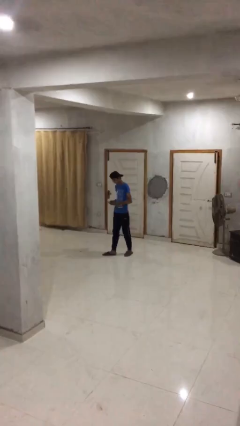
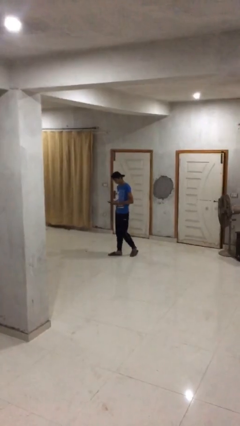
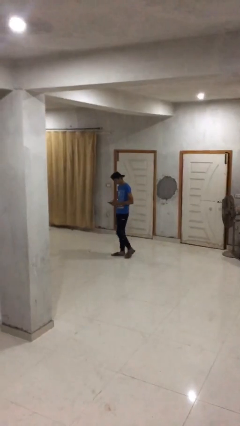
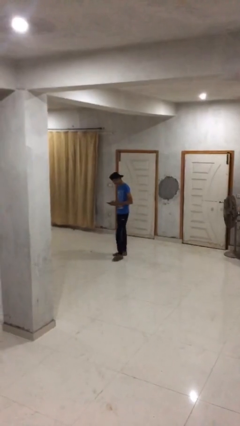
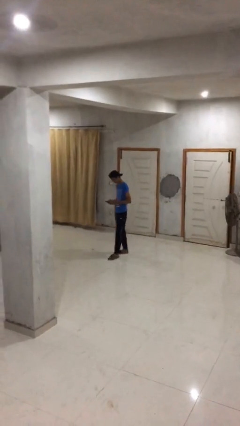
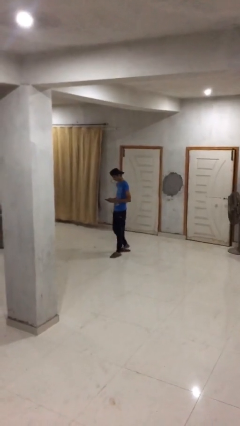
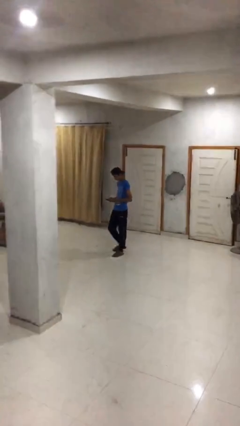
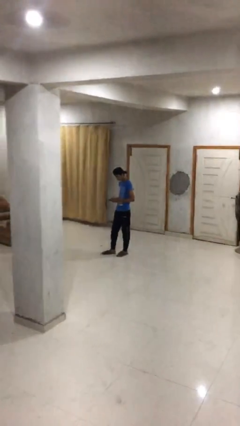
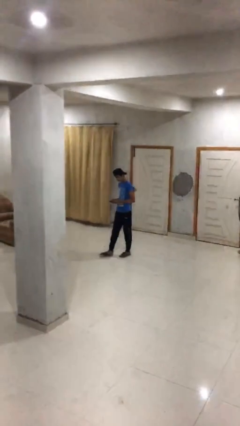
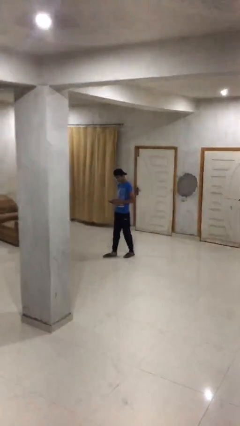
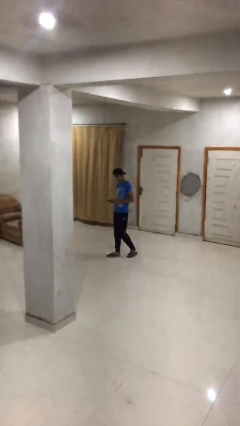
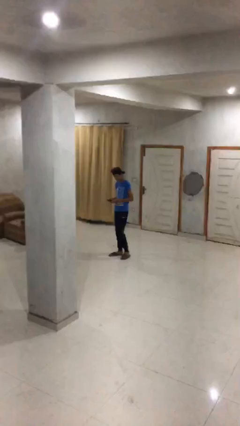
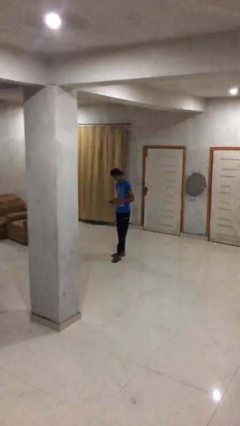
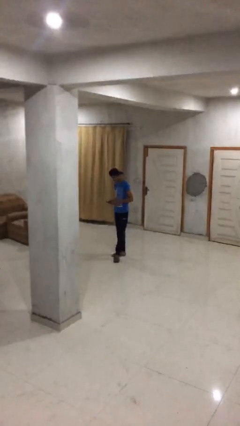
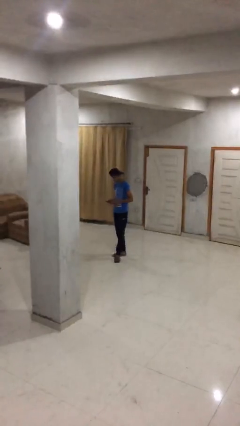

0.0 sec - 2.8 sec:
person texts on phone

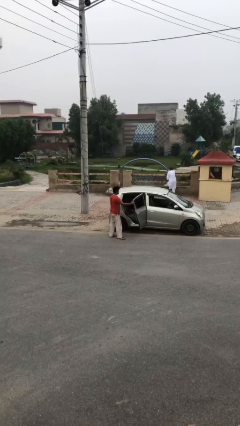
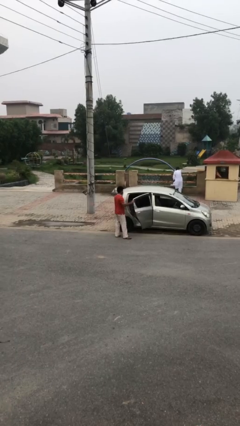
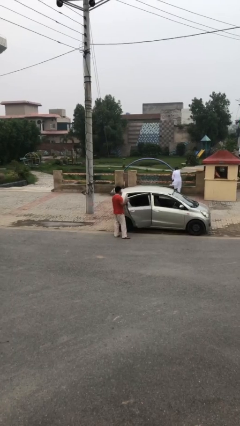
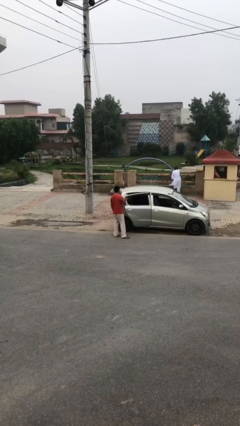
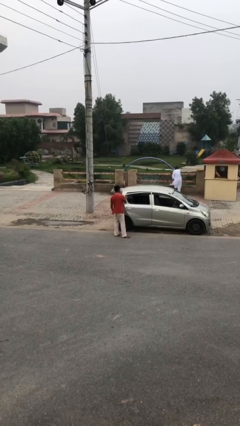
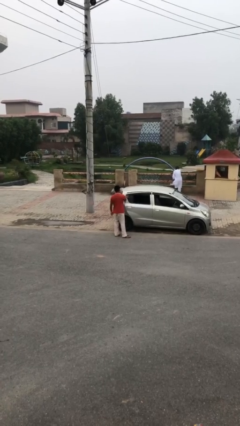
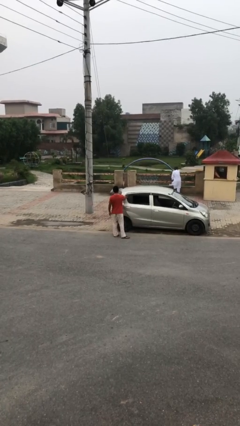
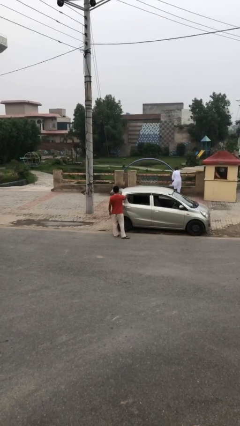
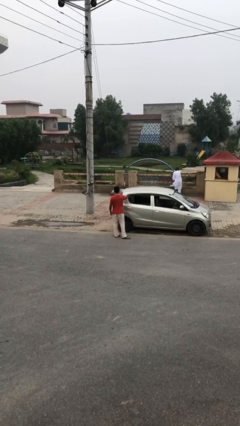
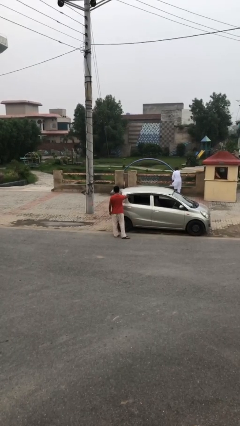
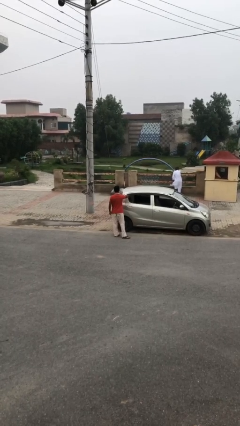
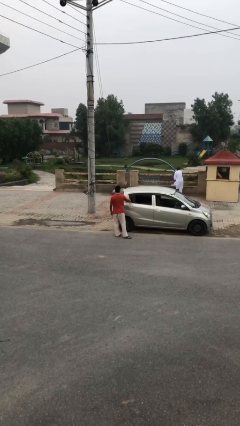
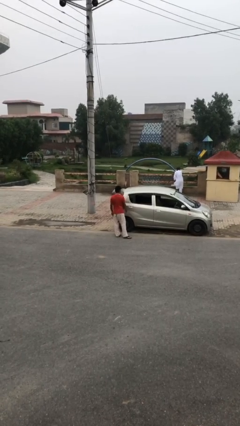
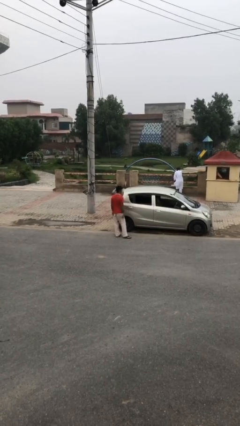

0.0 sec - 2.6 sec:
person closes car door

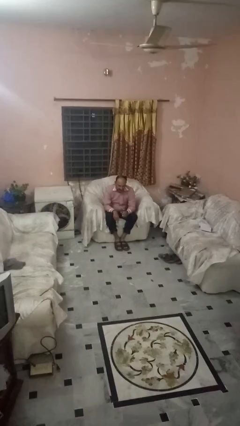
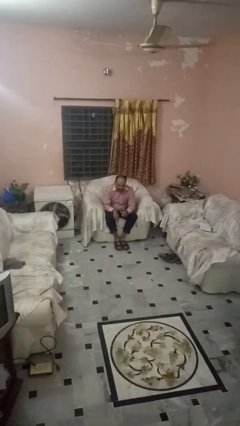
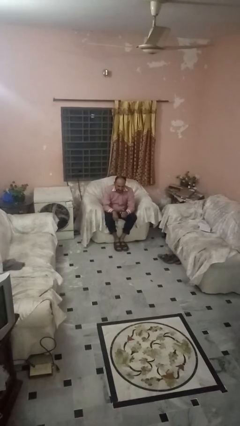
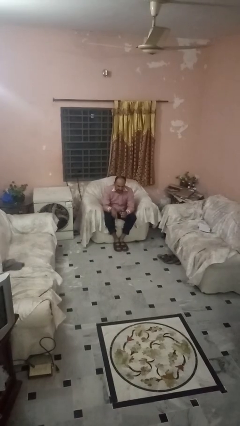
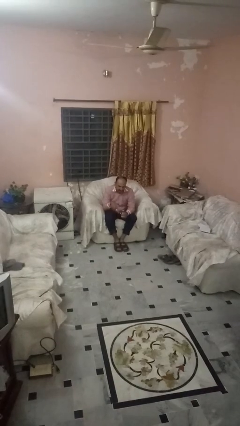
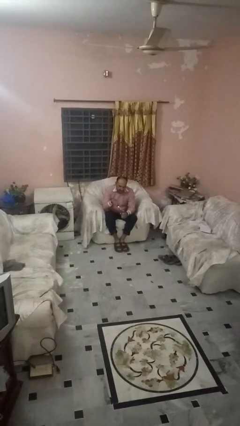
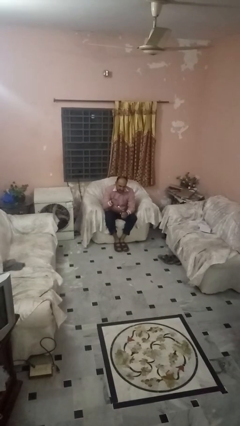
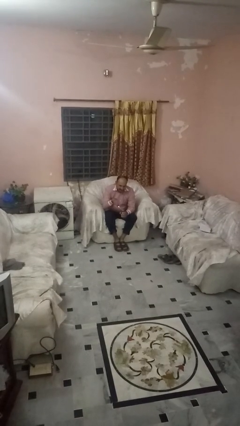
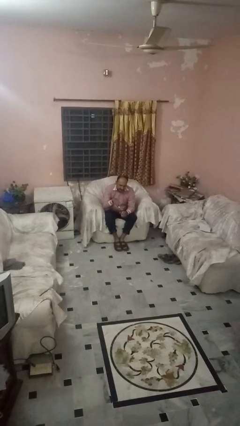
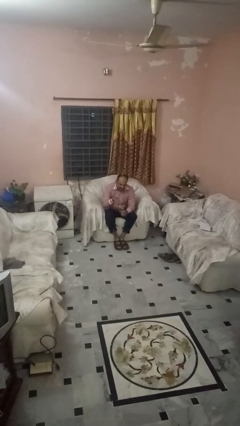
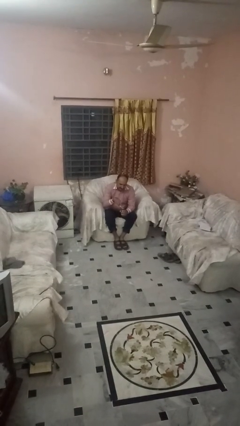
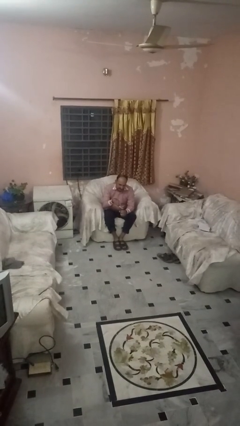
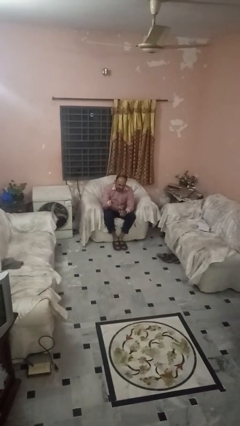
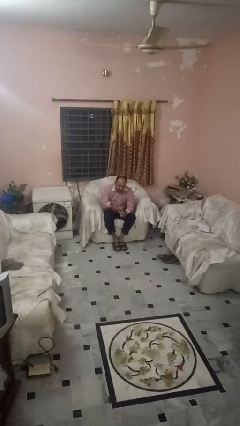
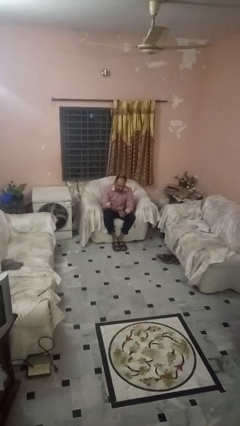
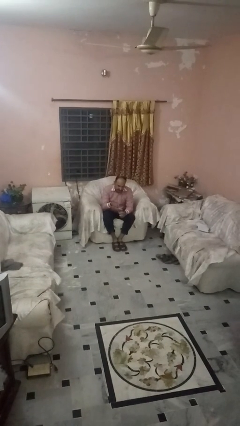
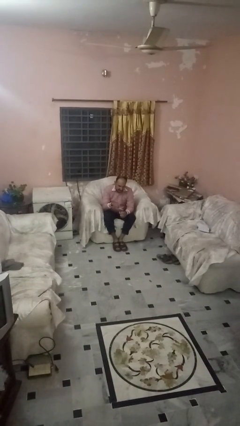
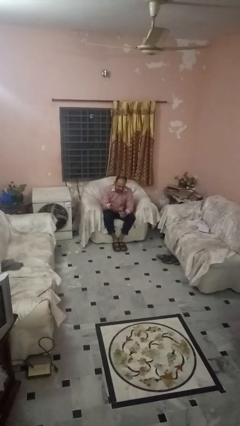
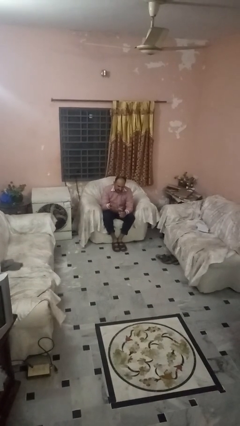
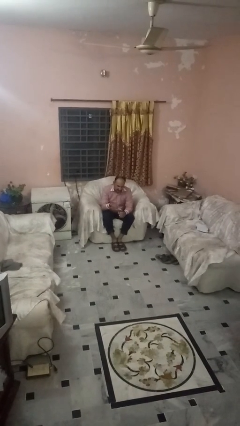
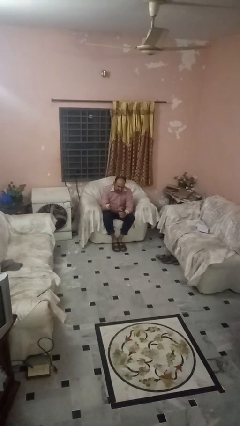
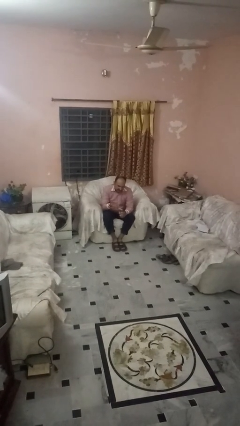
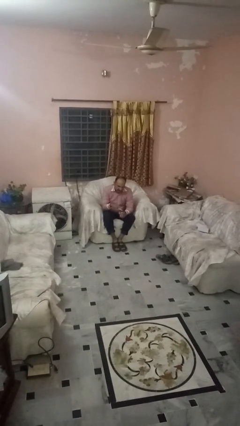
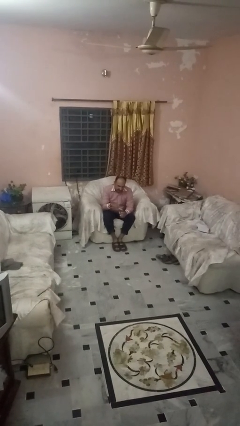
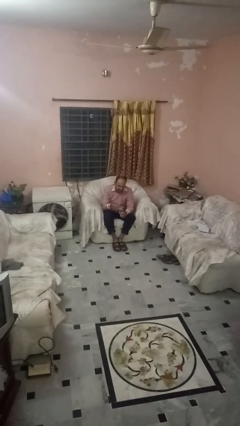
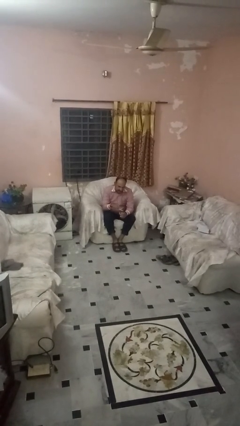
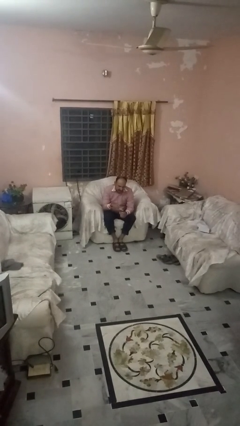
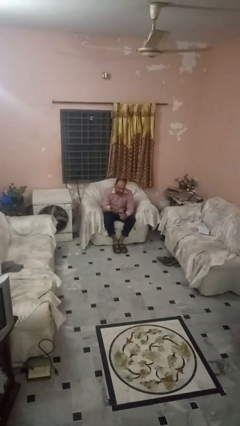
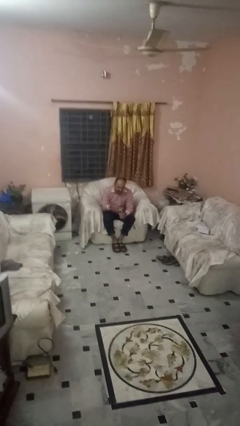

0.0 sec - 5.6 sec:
person opens can with can opener

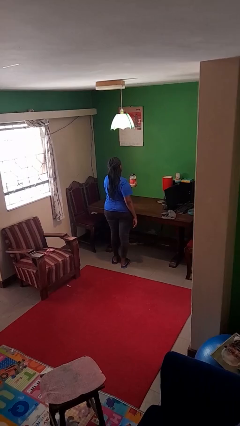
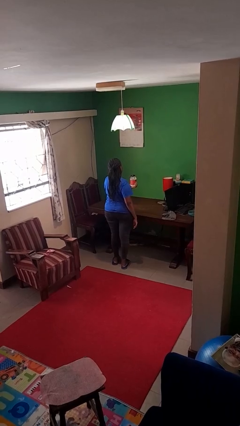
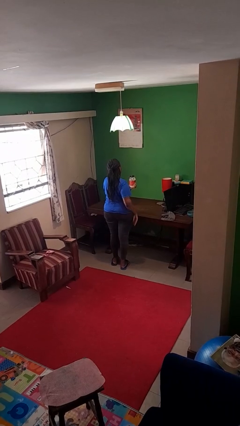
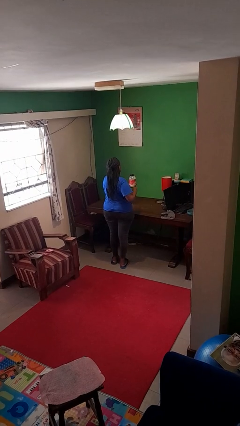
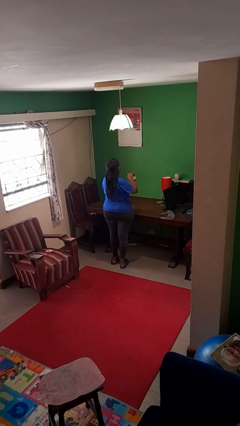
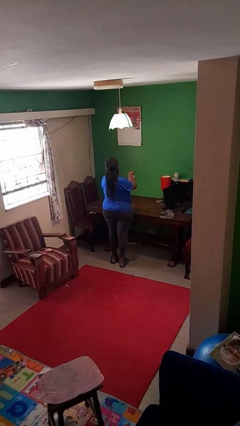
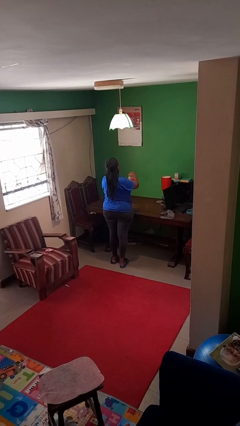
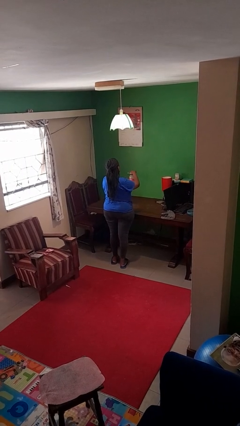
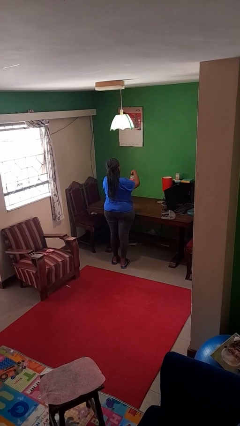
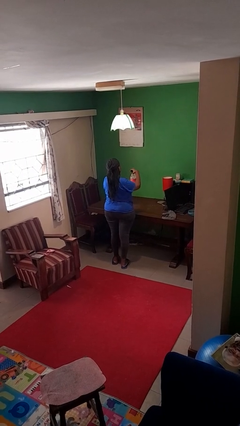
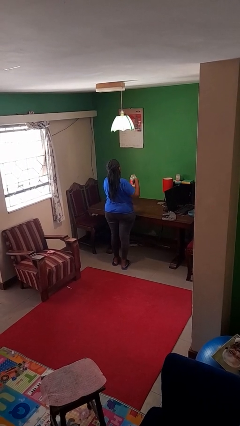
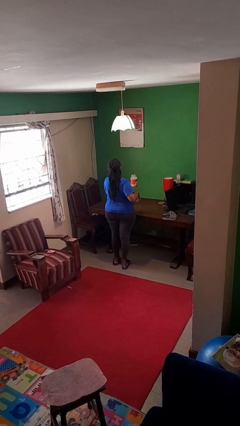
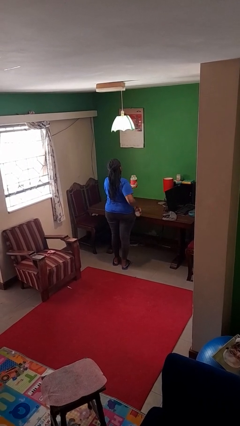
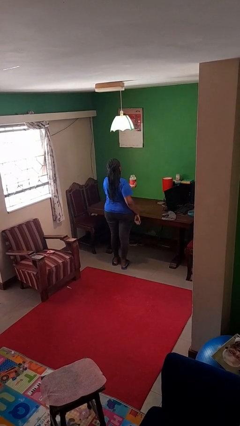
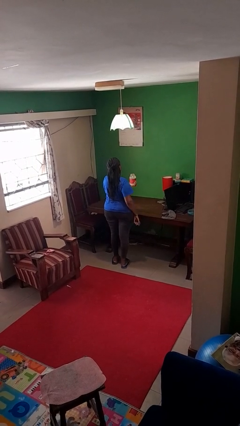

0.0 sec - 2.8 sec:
person opens jar

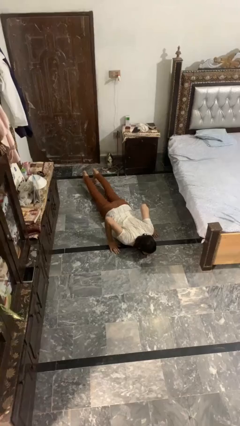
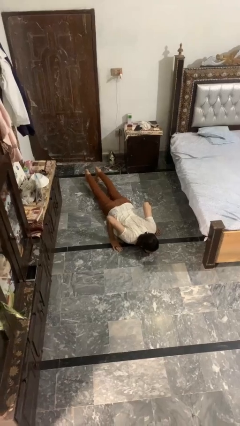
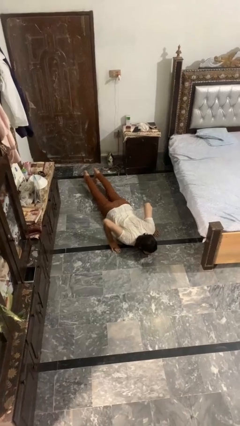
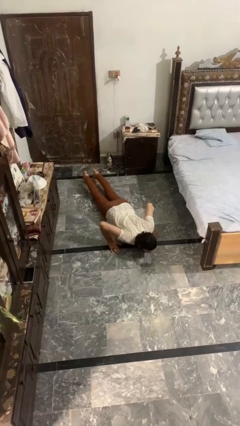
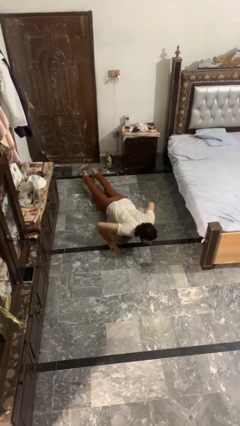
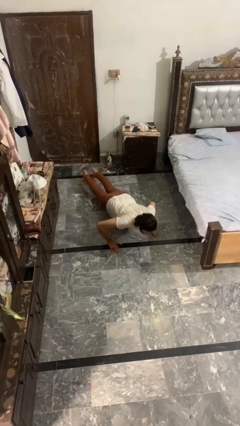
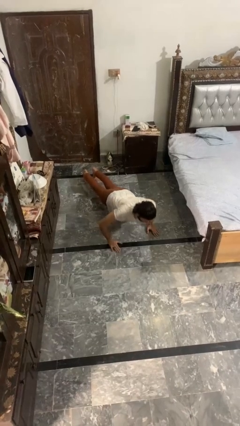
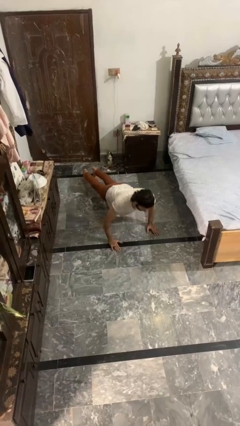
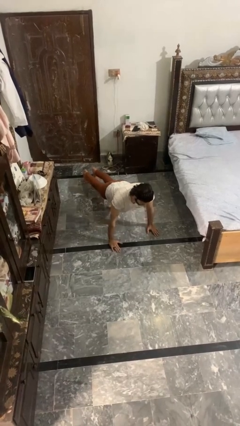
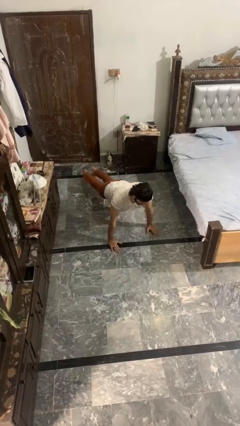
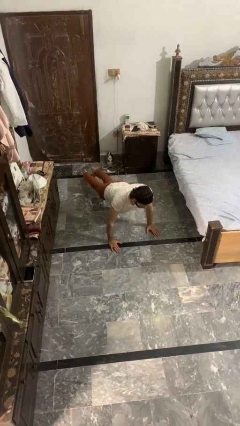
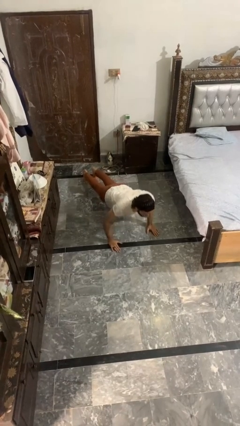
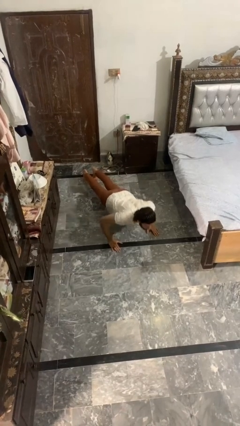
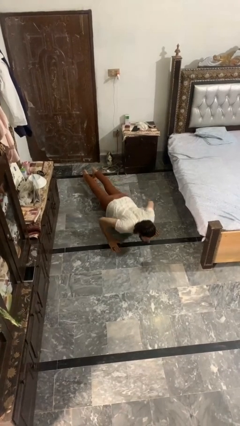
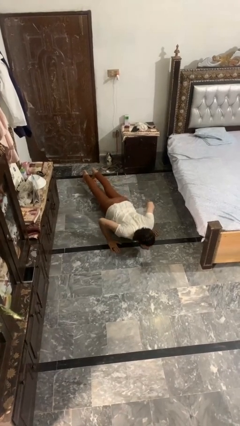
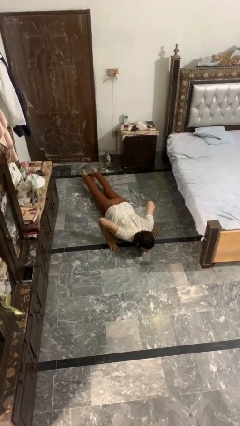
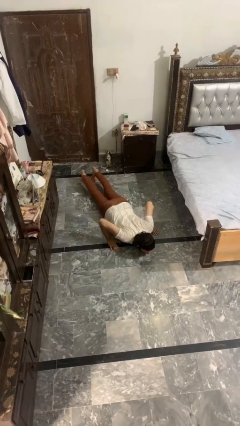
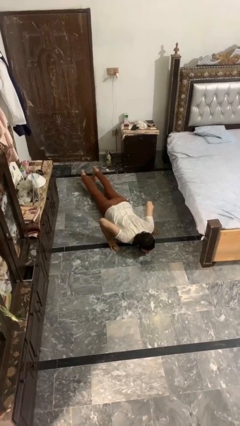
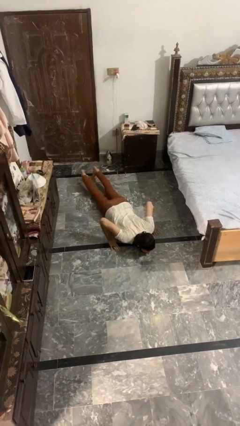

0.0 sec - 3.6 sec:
person exercises with pushup
